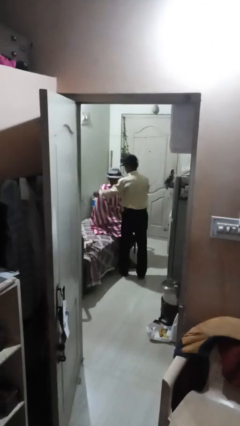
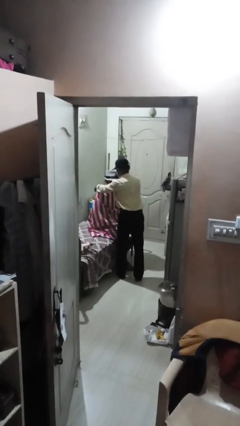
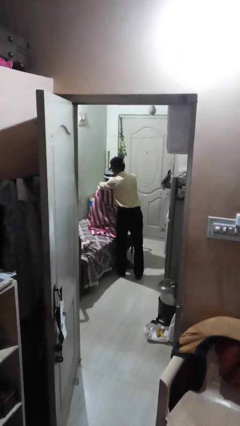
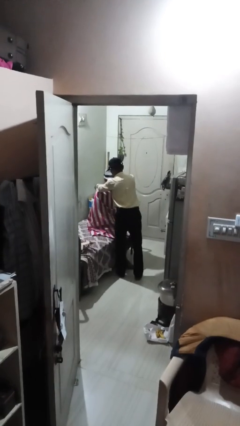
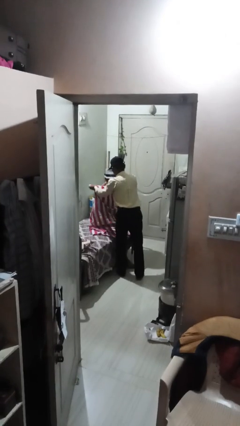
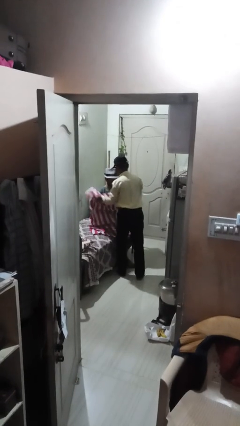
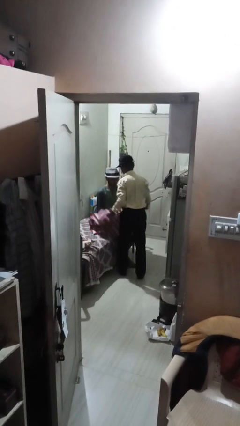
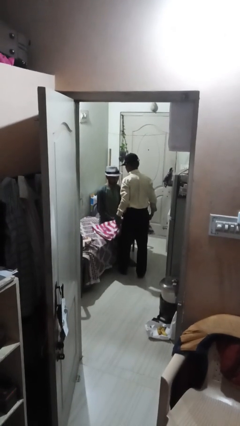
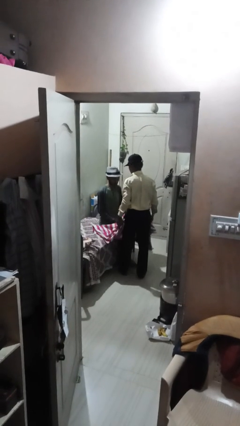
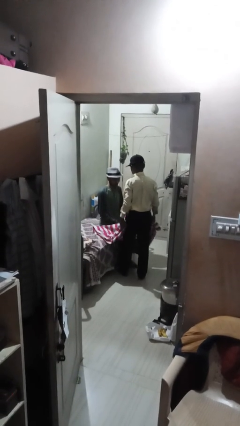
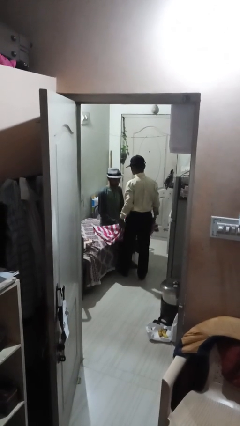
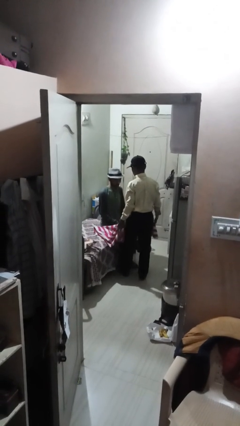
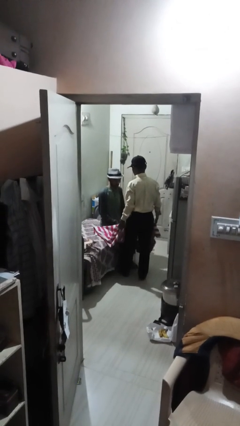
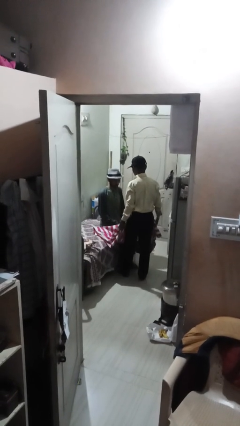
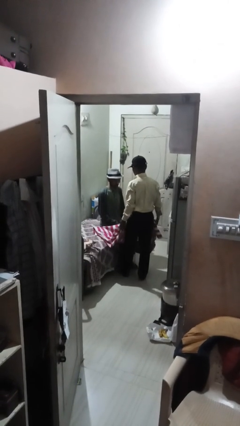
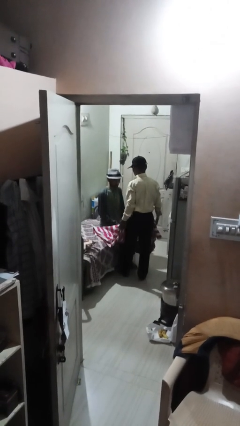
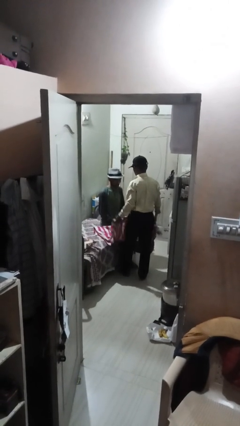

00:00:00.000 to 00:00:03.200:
person uncovers friend with blanket

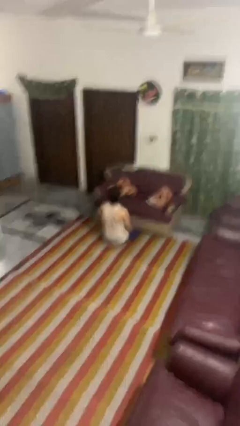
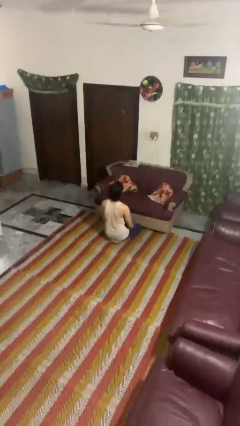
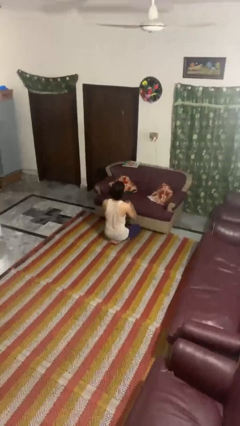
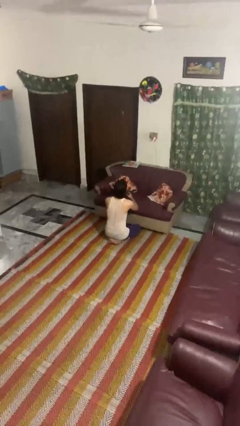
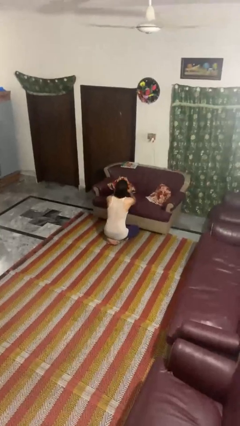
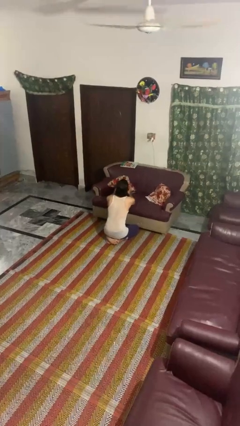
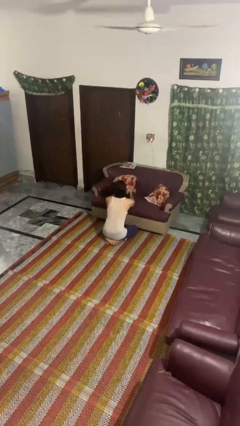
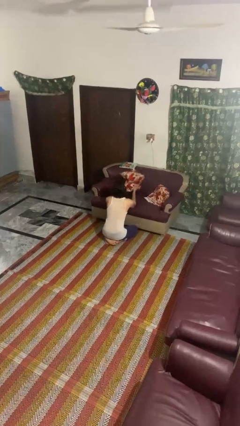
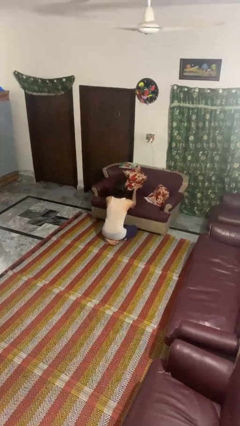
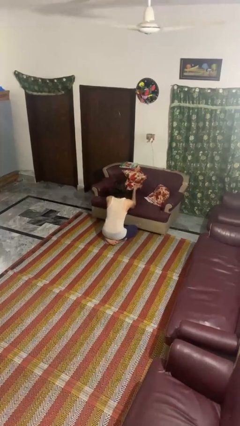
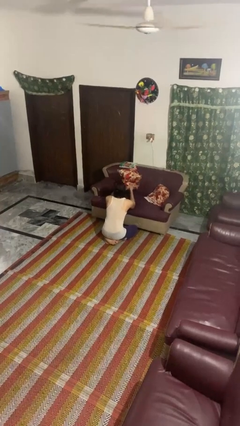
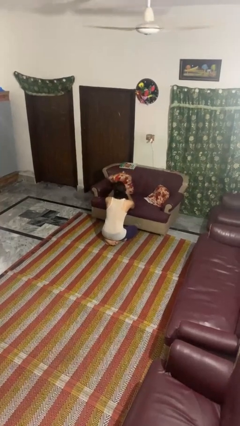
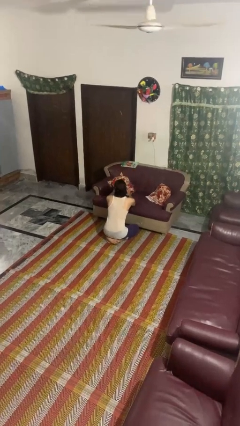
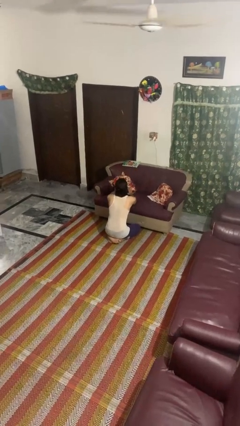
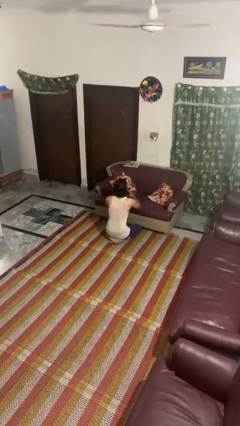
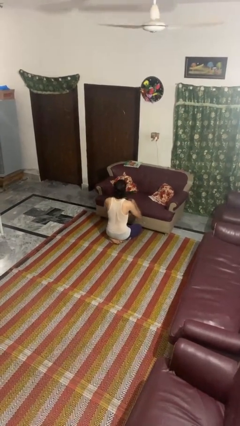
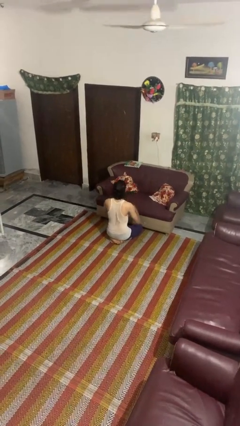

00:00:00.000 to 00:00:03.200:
person searches in couch

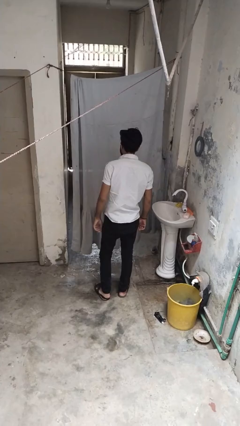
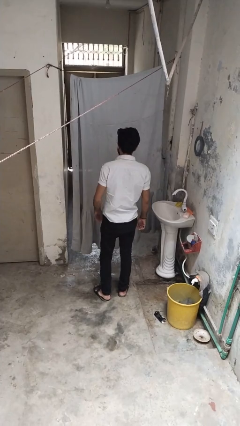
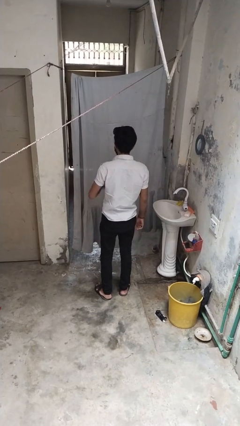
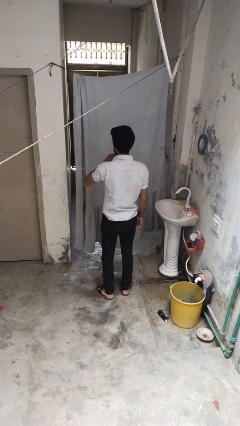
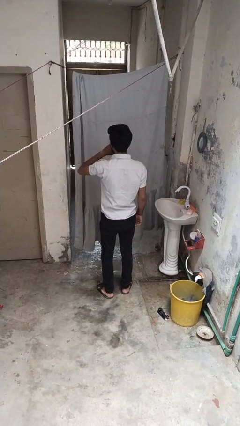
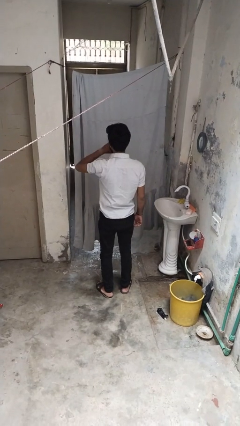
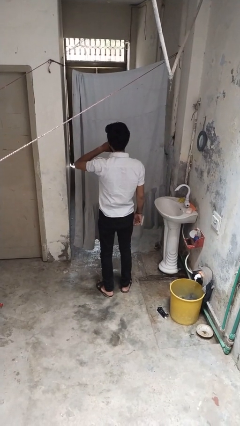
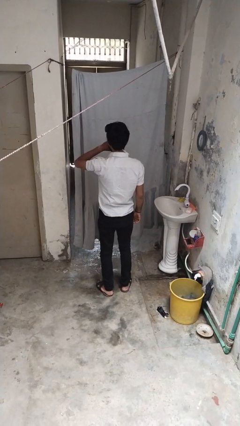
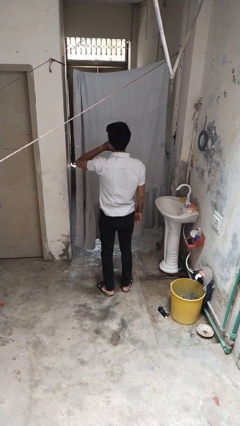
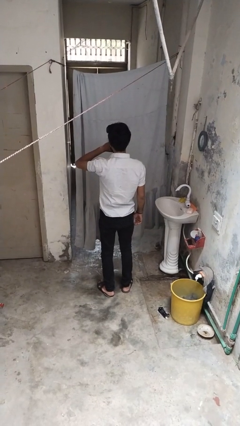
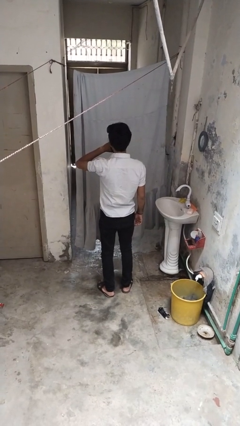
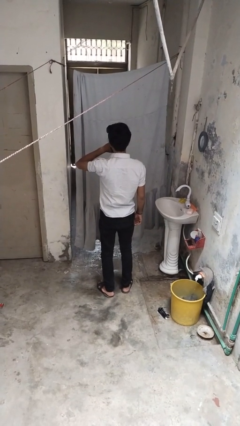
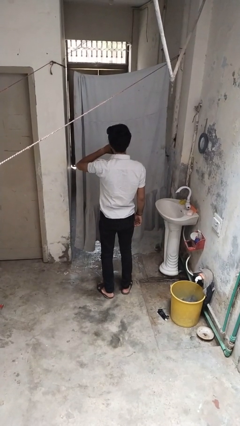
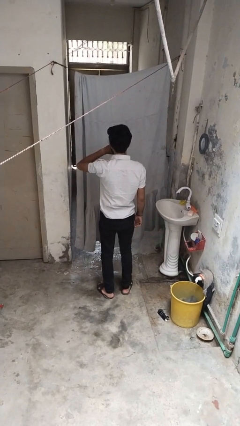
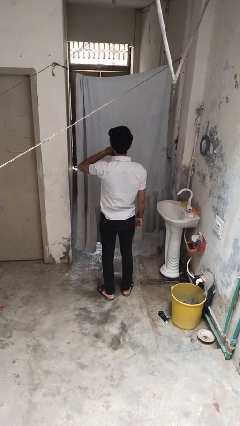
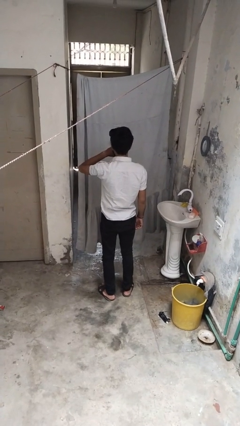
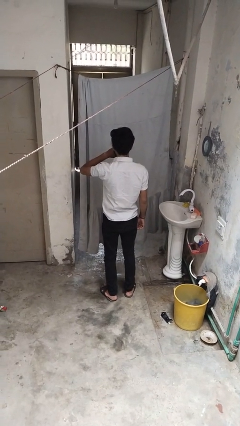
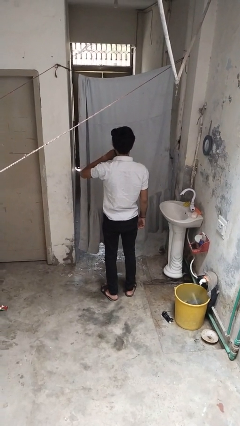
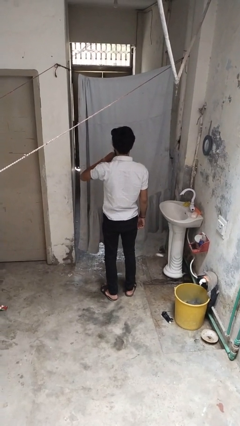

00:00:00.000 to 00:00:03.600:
person yawns

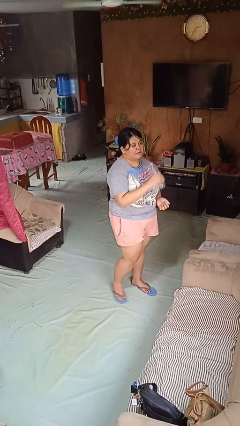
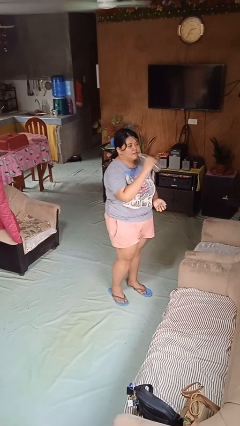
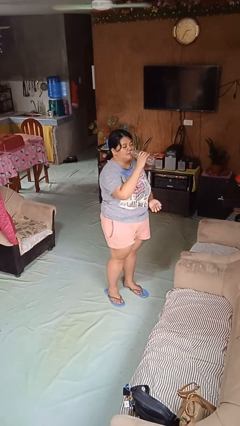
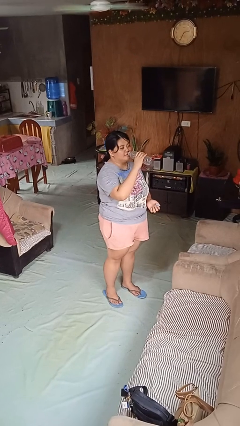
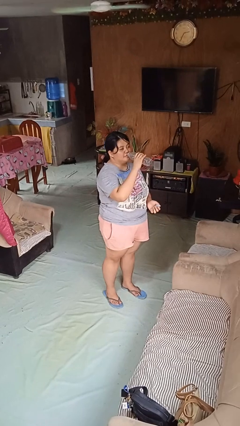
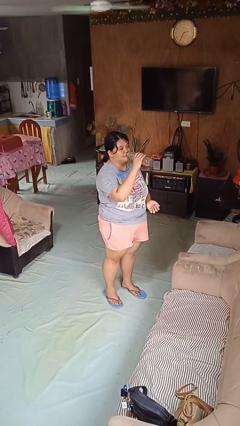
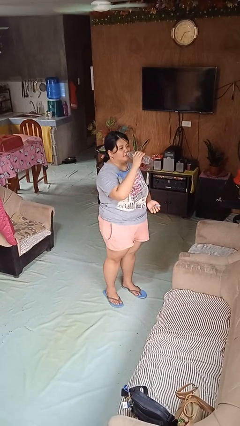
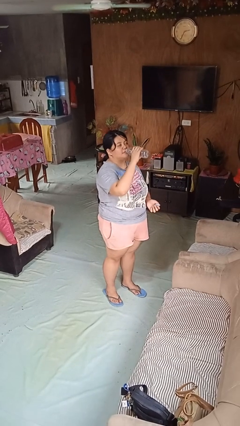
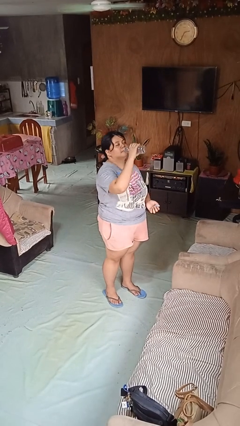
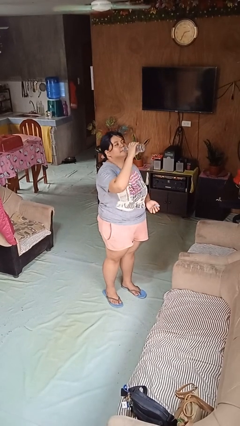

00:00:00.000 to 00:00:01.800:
person drinks from bottle

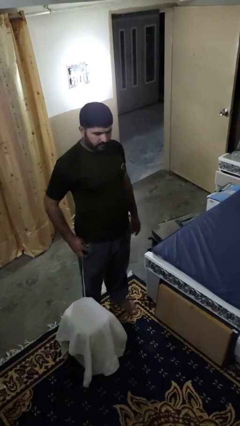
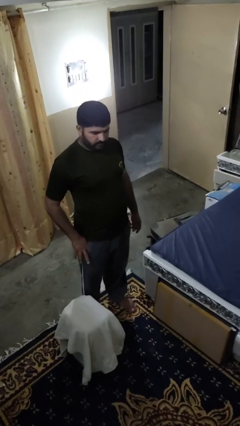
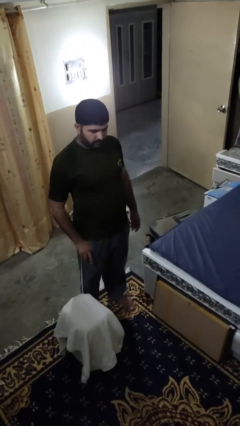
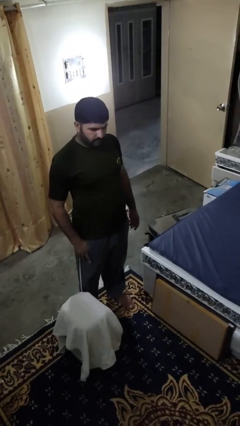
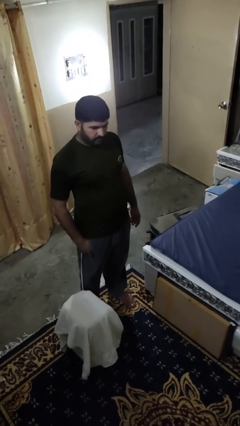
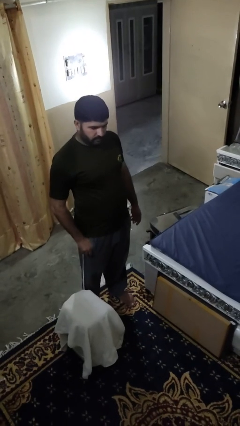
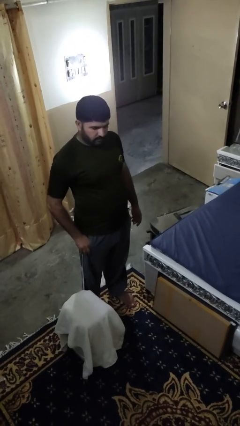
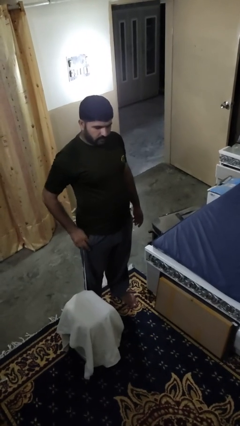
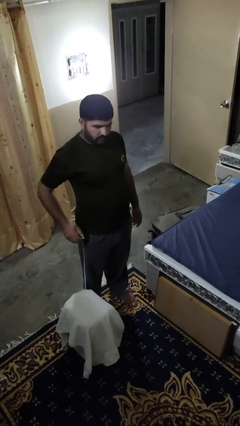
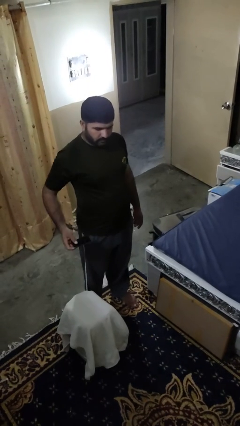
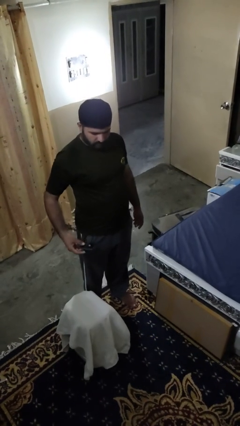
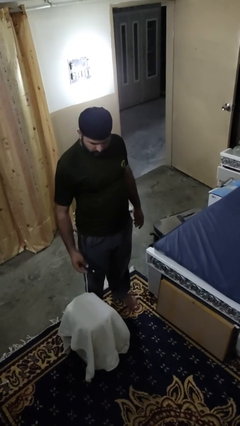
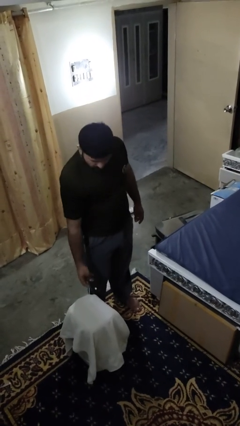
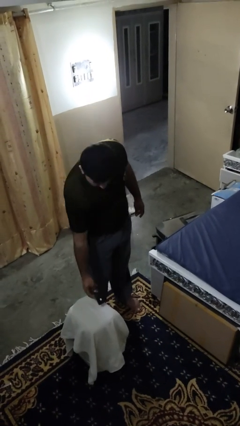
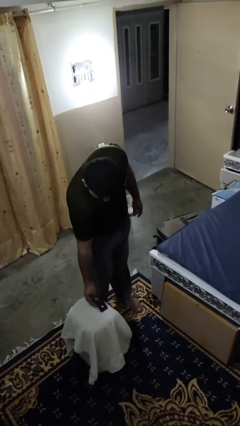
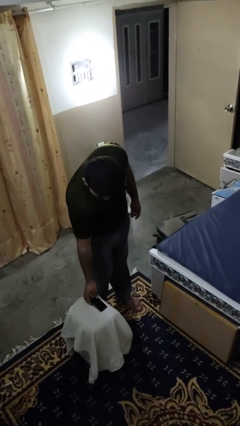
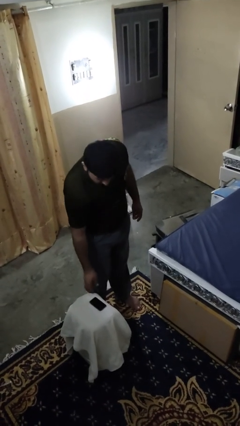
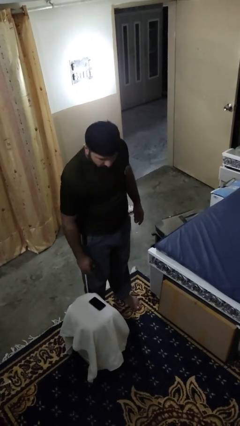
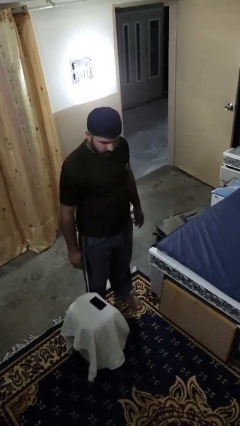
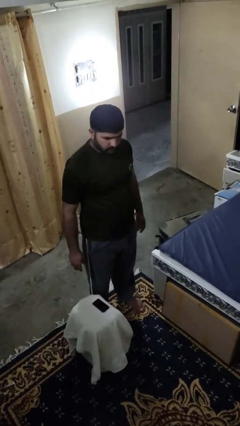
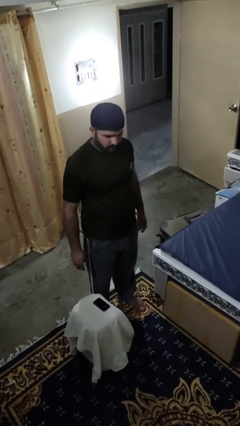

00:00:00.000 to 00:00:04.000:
person puts phone into pocket

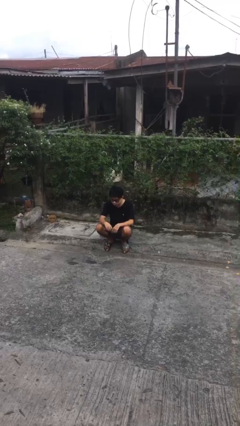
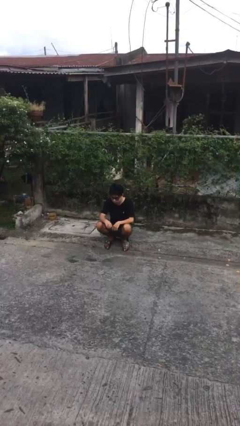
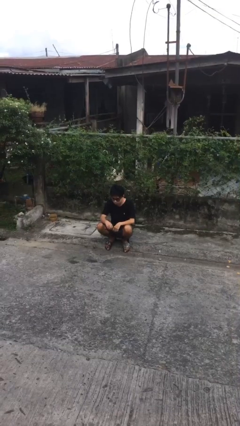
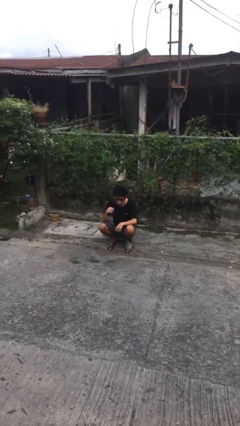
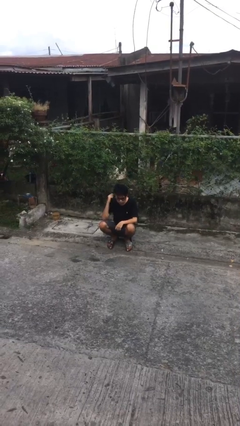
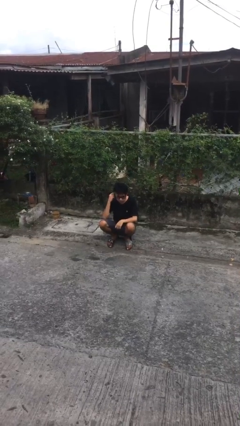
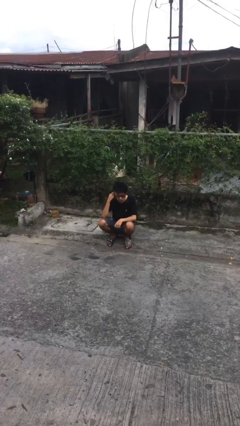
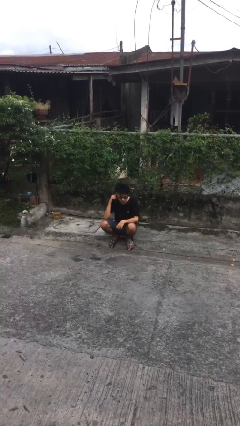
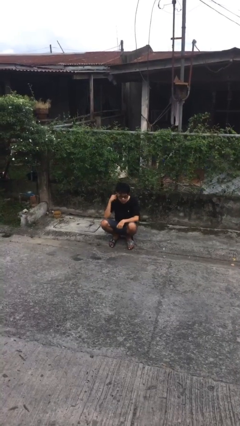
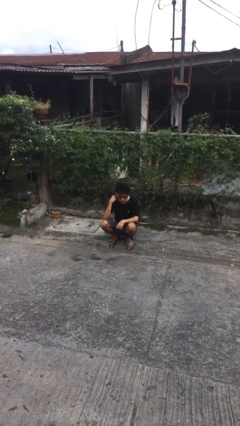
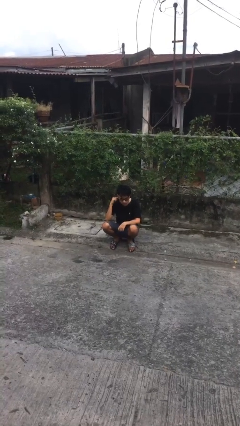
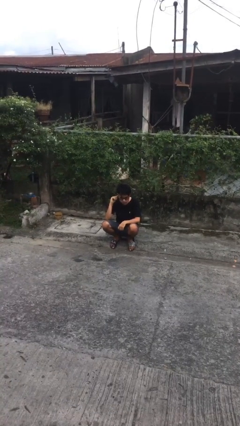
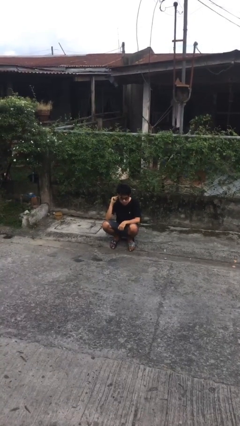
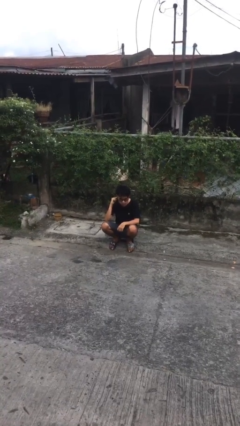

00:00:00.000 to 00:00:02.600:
person touches earlobe
